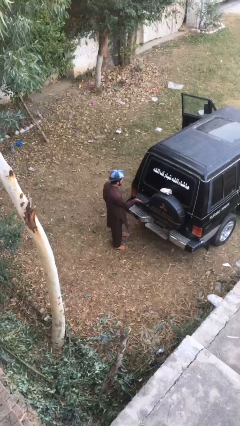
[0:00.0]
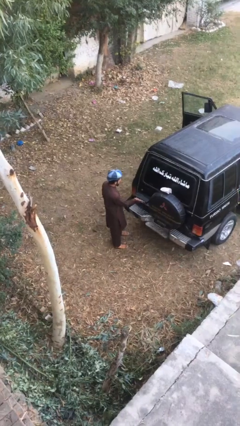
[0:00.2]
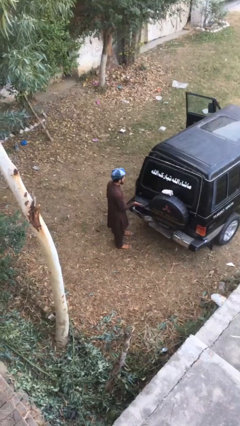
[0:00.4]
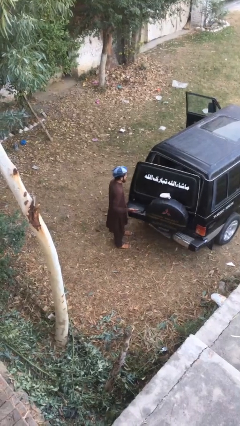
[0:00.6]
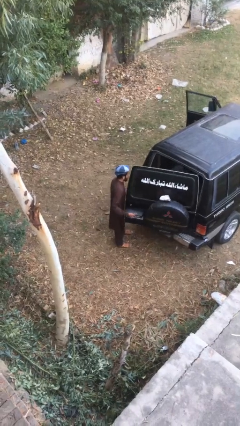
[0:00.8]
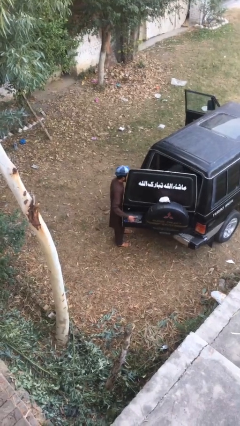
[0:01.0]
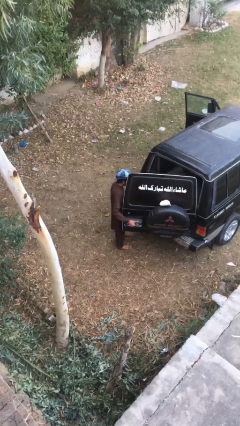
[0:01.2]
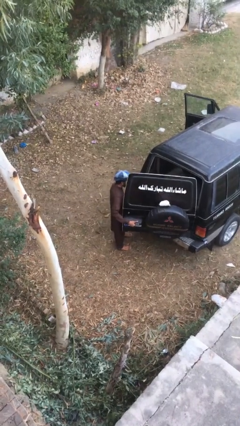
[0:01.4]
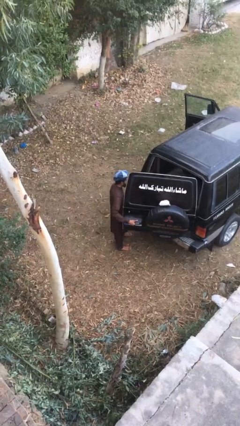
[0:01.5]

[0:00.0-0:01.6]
person opens car trunk

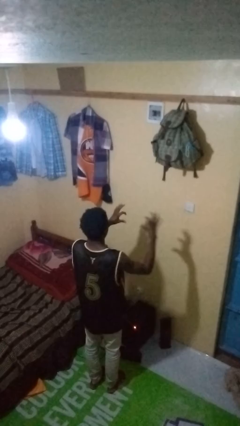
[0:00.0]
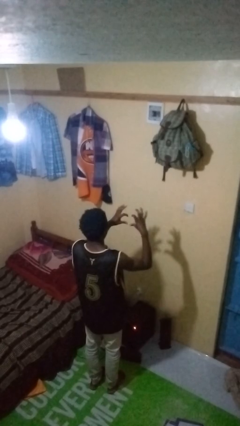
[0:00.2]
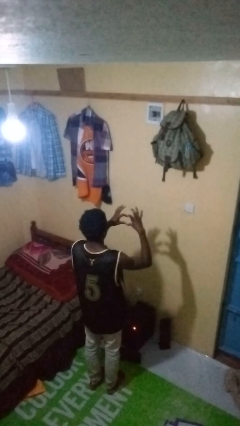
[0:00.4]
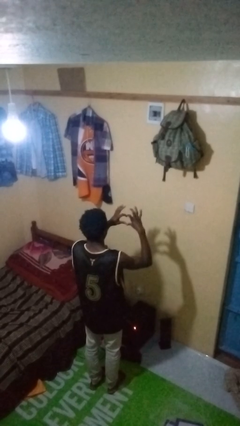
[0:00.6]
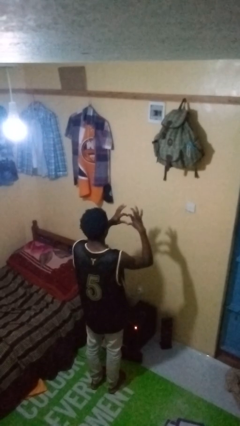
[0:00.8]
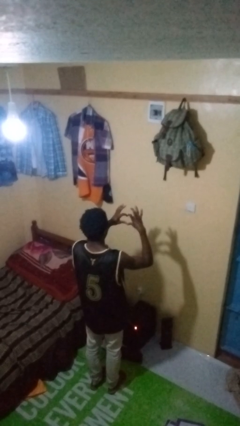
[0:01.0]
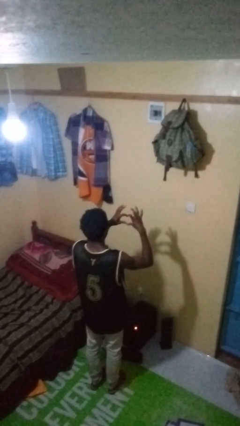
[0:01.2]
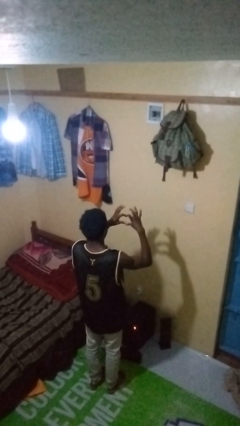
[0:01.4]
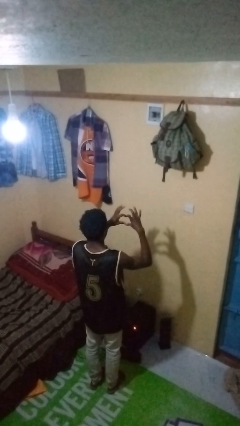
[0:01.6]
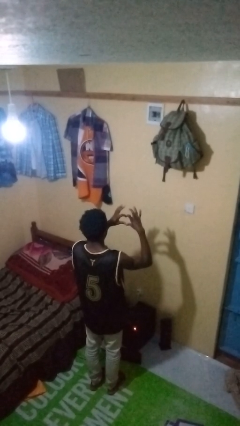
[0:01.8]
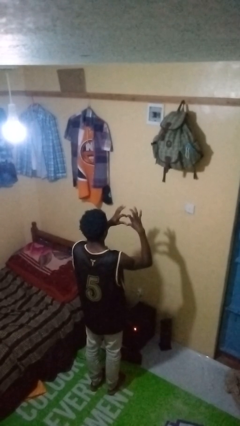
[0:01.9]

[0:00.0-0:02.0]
person gestures heart

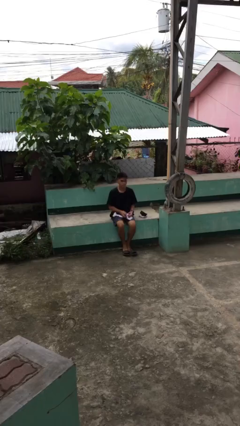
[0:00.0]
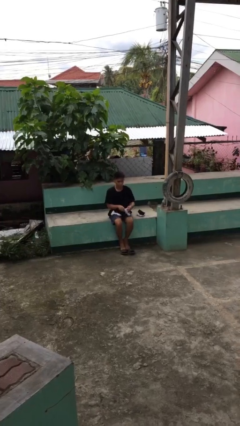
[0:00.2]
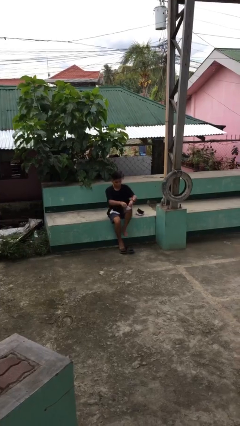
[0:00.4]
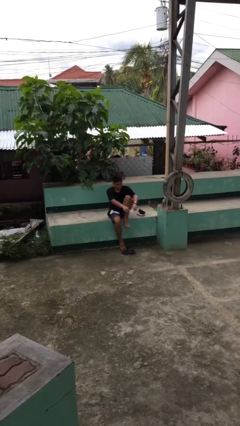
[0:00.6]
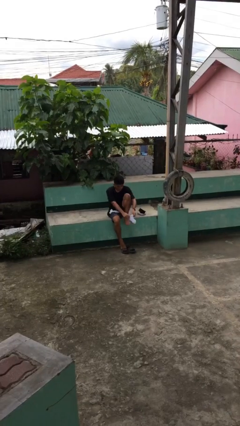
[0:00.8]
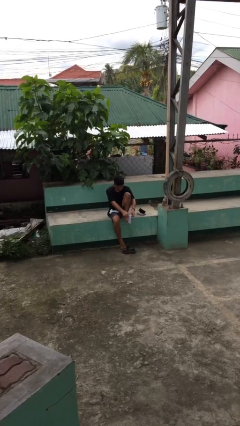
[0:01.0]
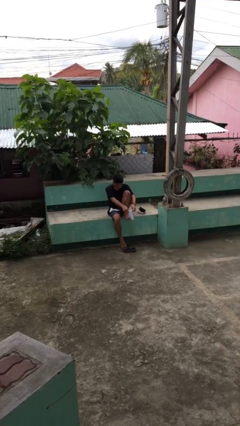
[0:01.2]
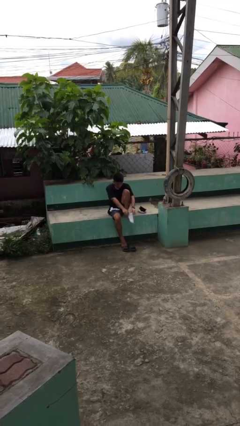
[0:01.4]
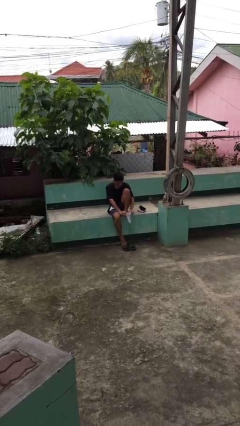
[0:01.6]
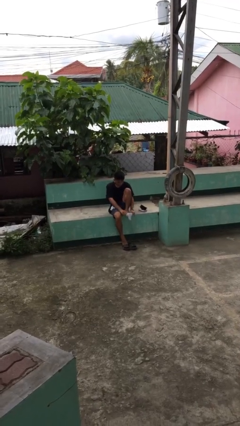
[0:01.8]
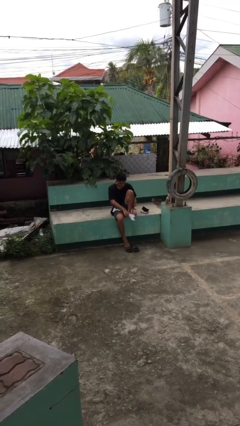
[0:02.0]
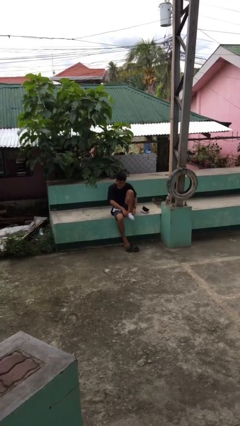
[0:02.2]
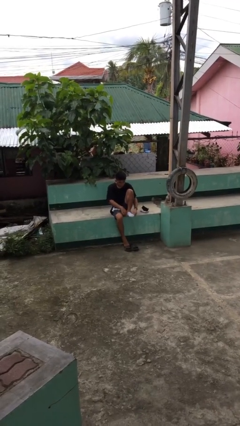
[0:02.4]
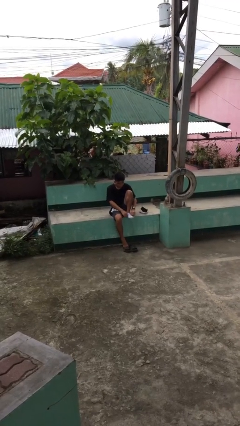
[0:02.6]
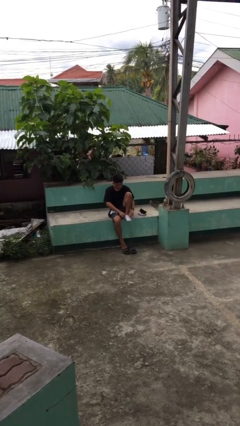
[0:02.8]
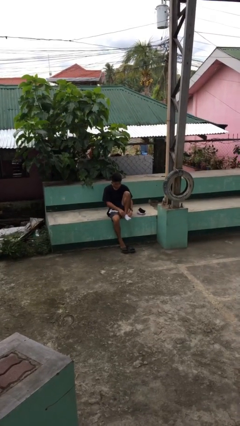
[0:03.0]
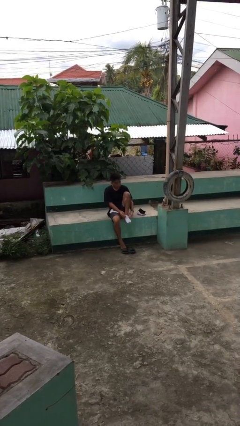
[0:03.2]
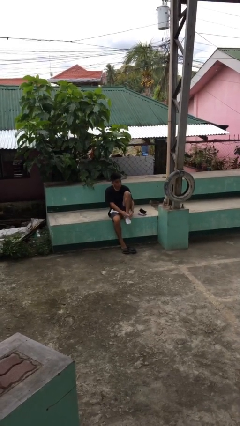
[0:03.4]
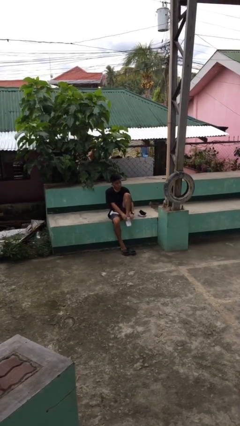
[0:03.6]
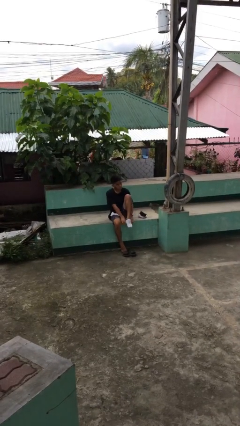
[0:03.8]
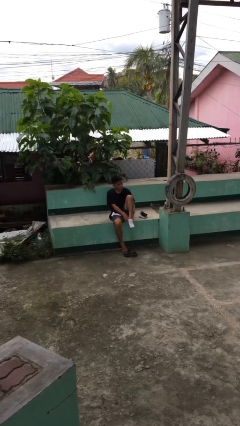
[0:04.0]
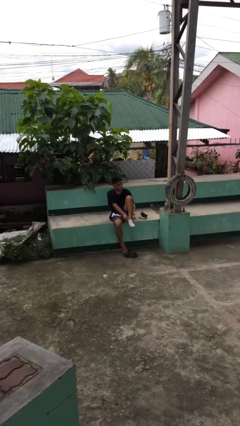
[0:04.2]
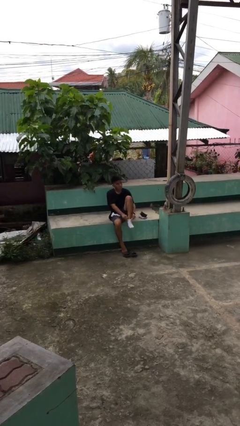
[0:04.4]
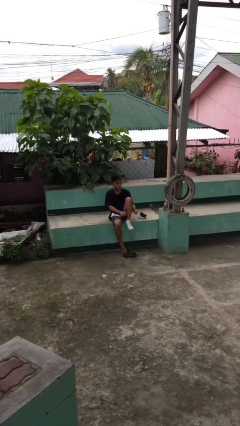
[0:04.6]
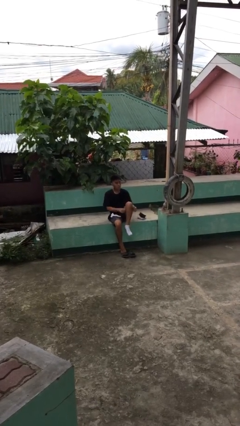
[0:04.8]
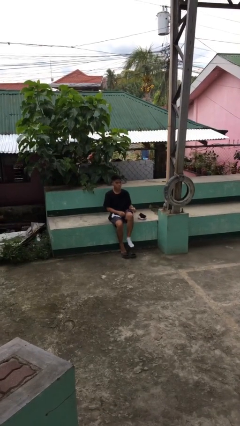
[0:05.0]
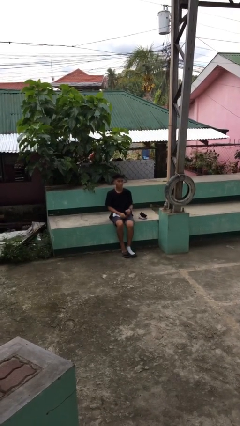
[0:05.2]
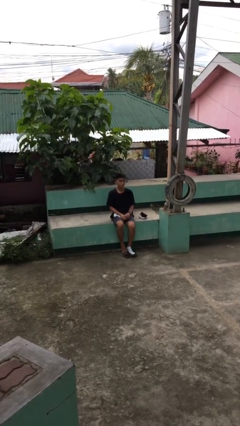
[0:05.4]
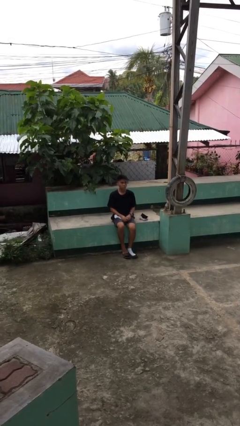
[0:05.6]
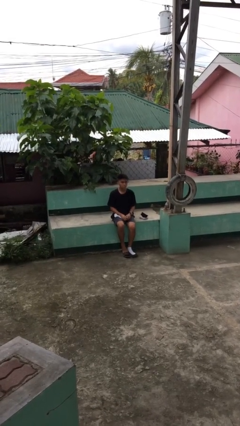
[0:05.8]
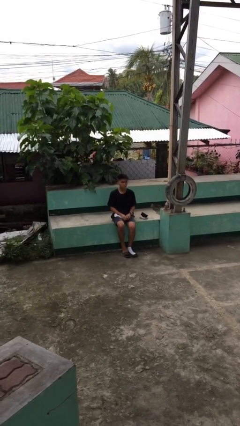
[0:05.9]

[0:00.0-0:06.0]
person puts on socks

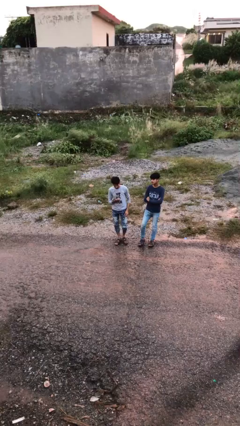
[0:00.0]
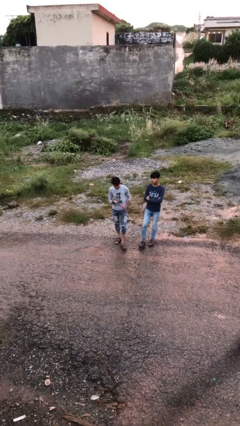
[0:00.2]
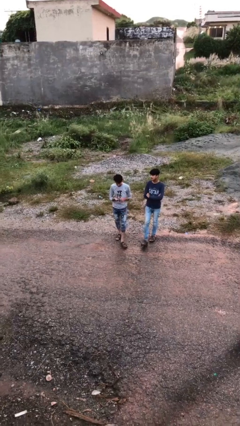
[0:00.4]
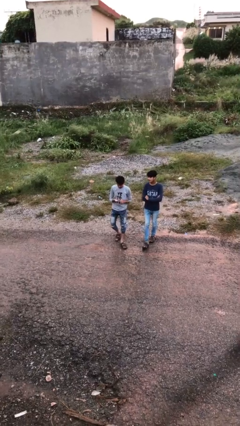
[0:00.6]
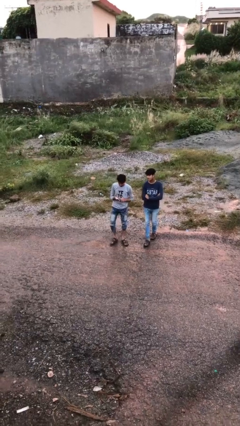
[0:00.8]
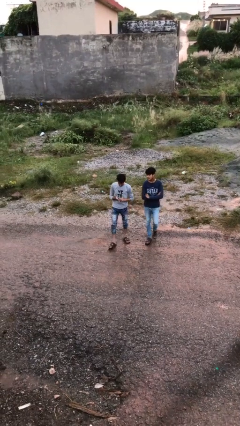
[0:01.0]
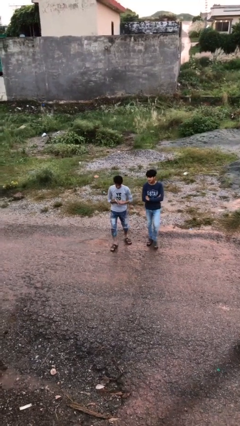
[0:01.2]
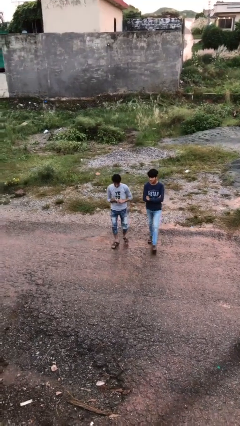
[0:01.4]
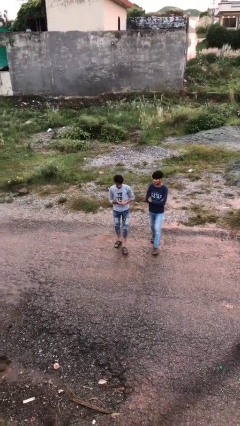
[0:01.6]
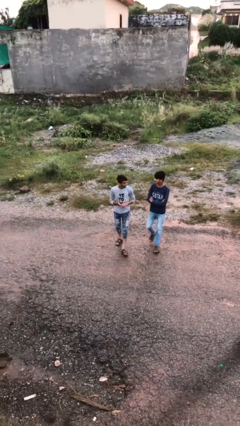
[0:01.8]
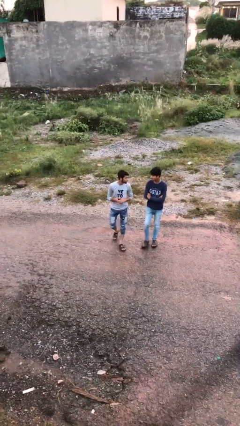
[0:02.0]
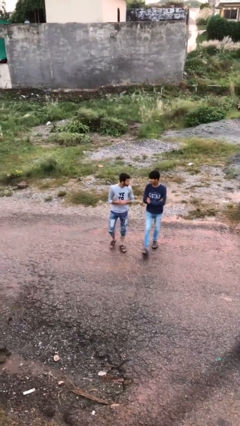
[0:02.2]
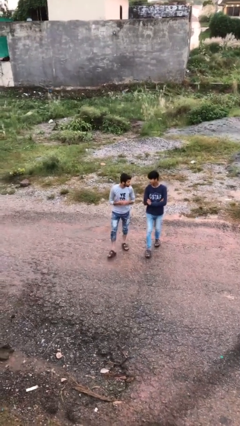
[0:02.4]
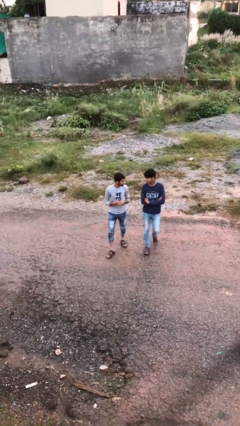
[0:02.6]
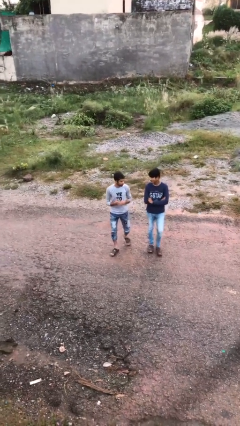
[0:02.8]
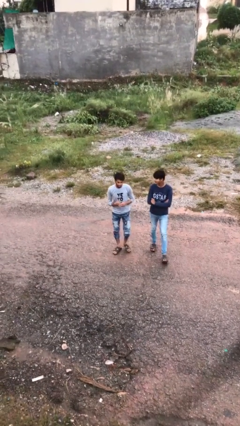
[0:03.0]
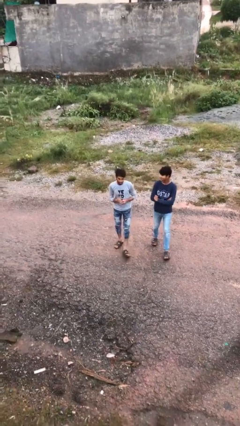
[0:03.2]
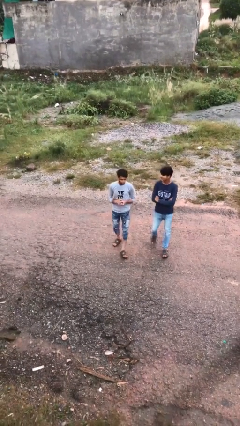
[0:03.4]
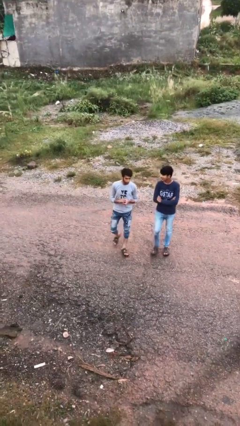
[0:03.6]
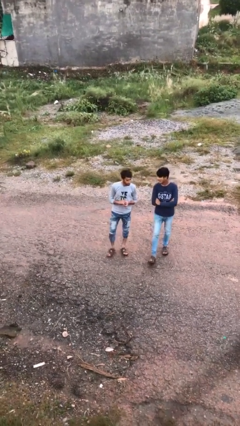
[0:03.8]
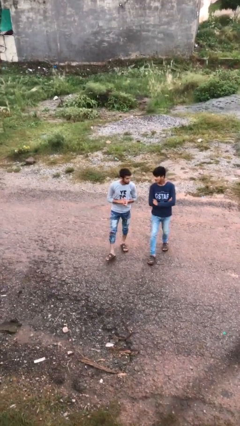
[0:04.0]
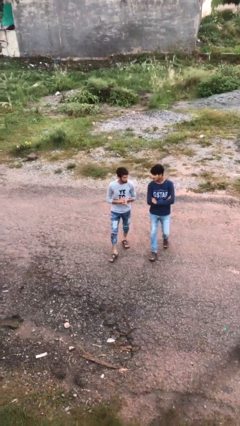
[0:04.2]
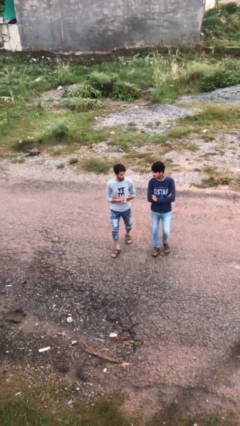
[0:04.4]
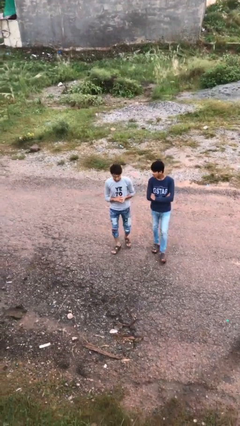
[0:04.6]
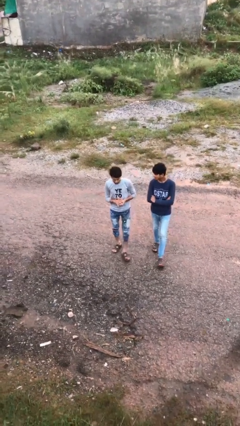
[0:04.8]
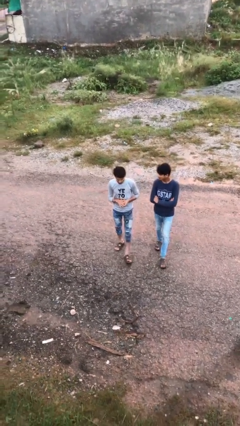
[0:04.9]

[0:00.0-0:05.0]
person talks to person

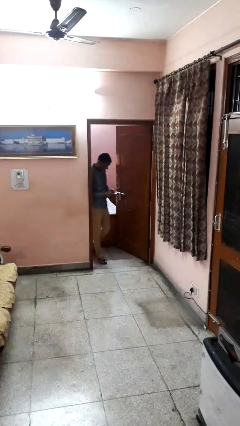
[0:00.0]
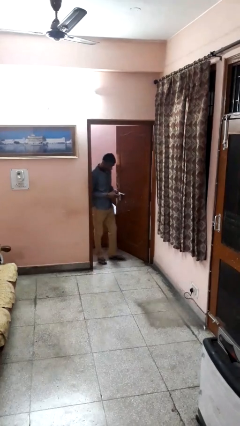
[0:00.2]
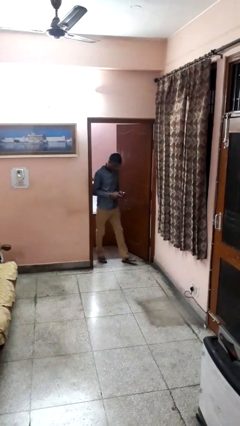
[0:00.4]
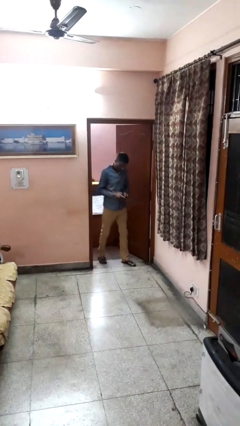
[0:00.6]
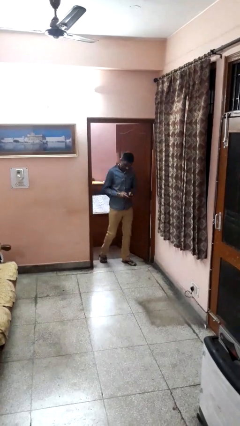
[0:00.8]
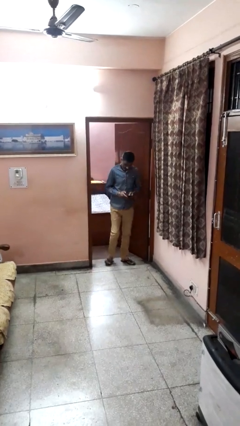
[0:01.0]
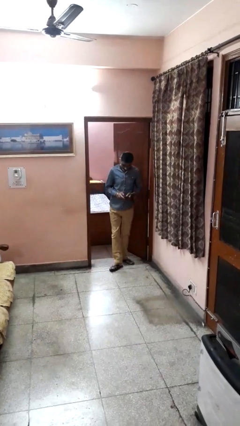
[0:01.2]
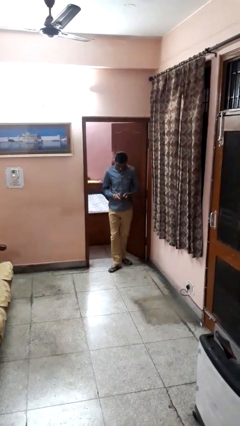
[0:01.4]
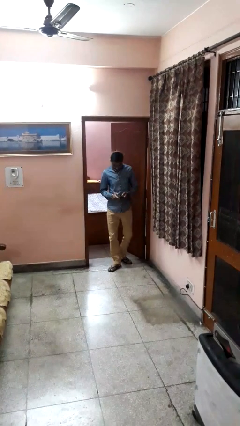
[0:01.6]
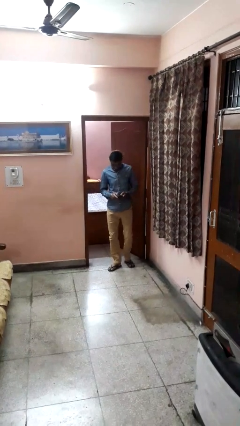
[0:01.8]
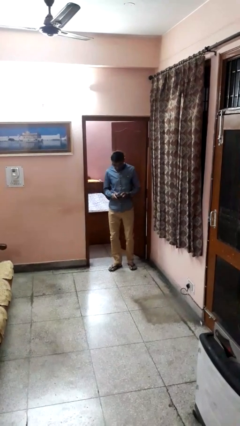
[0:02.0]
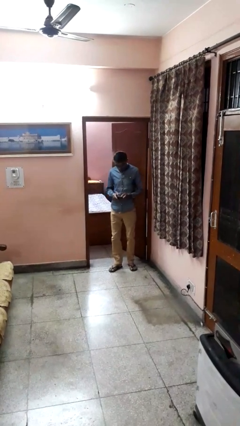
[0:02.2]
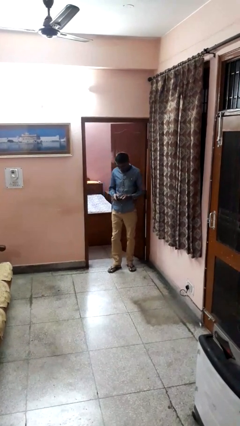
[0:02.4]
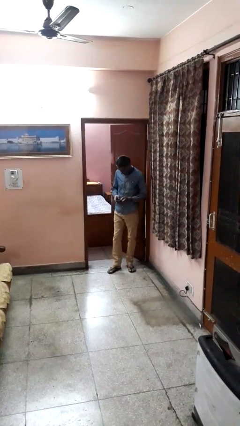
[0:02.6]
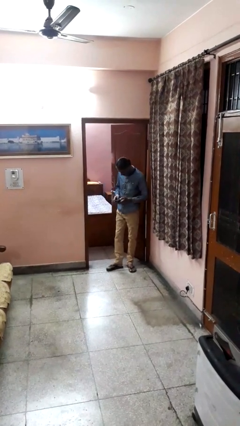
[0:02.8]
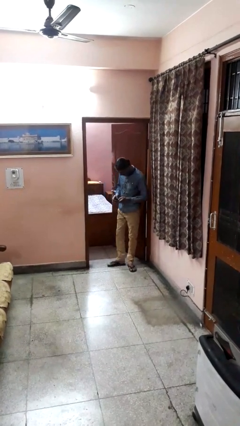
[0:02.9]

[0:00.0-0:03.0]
person enters scene through structure

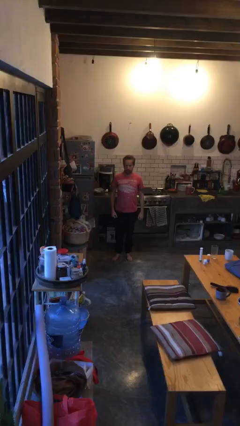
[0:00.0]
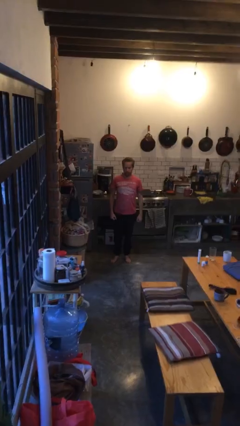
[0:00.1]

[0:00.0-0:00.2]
person exercises with lunges
